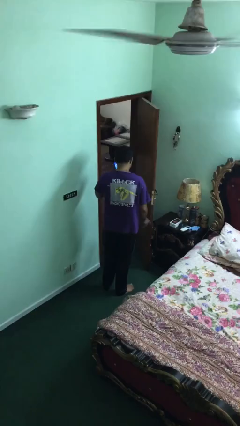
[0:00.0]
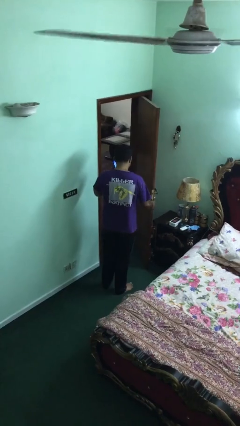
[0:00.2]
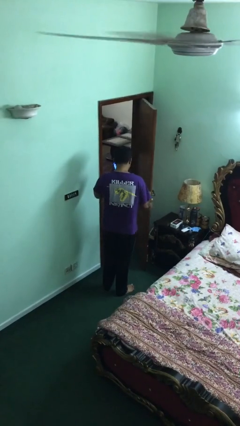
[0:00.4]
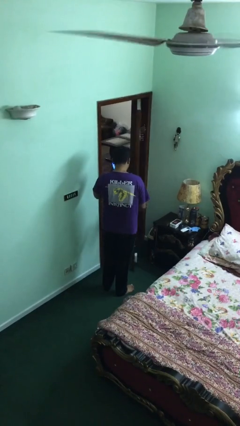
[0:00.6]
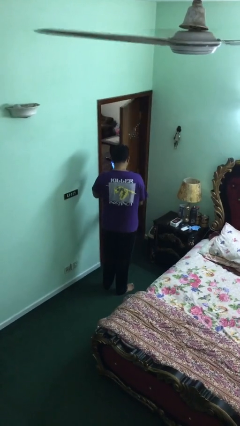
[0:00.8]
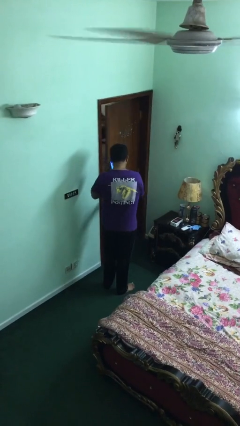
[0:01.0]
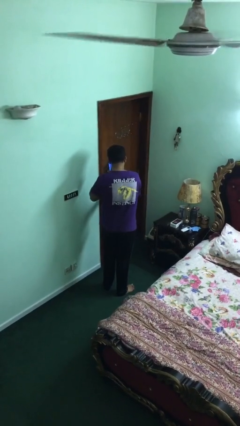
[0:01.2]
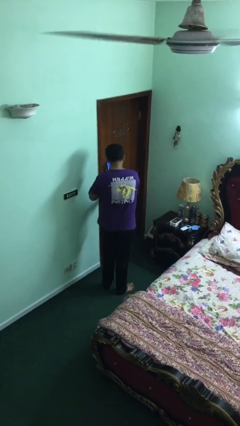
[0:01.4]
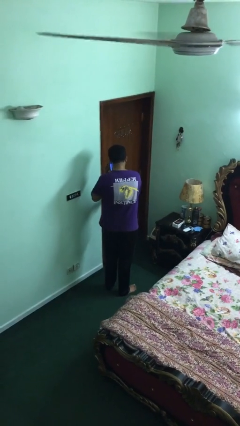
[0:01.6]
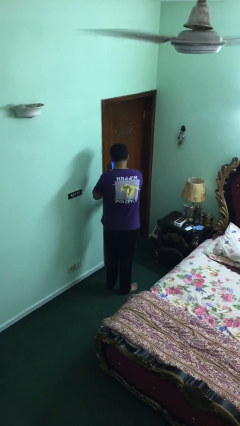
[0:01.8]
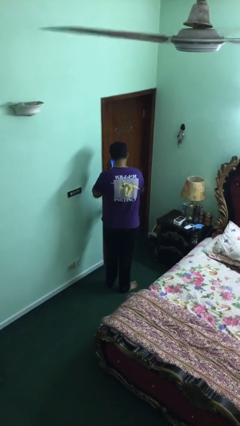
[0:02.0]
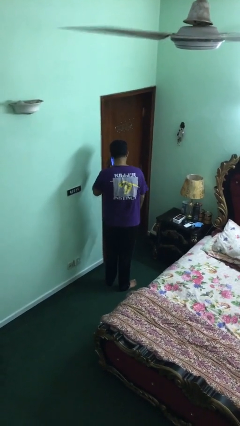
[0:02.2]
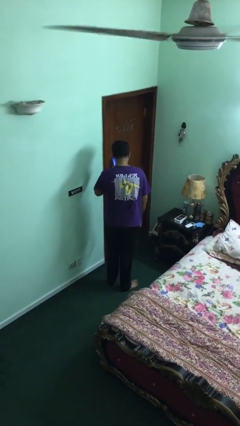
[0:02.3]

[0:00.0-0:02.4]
person closes facility door

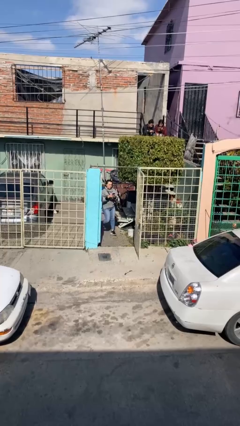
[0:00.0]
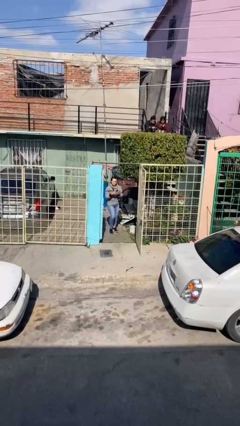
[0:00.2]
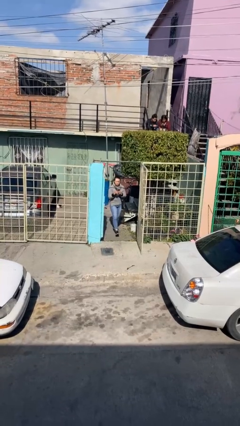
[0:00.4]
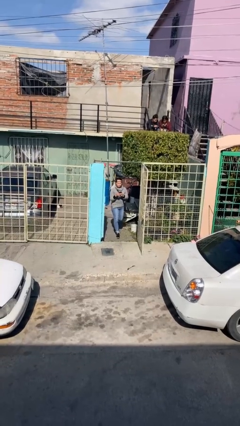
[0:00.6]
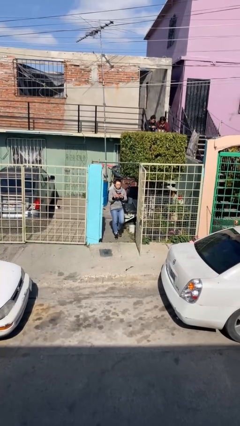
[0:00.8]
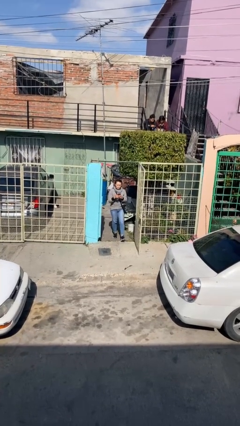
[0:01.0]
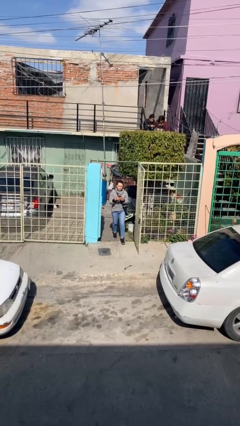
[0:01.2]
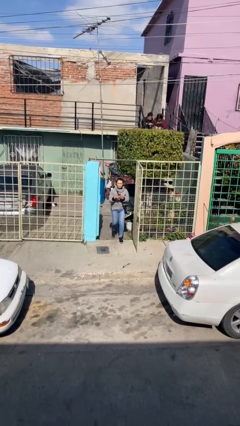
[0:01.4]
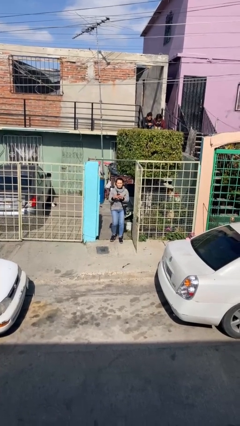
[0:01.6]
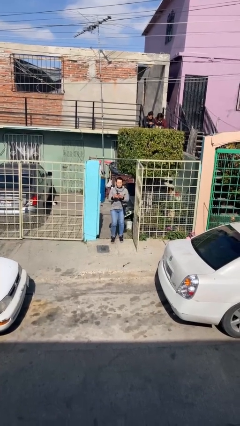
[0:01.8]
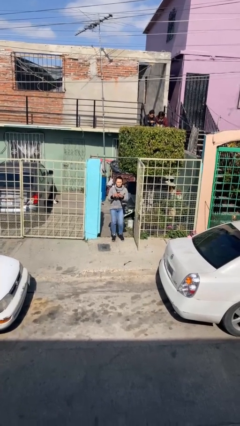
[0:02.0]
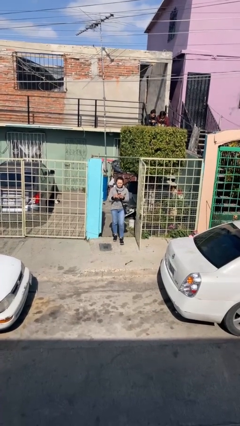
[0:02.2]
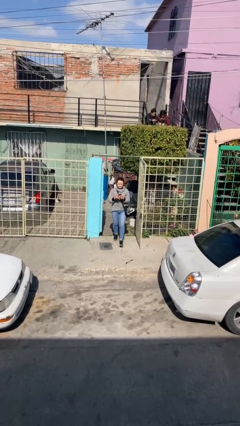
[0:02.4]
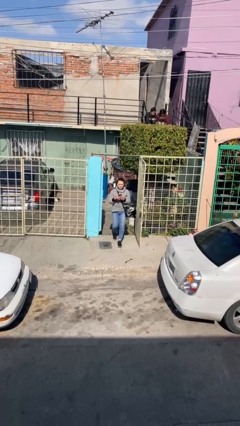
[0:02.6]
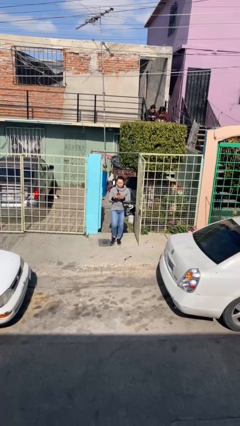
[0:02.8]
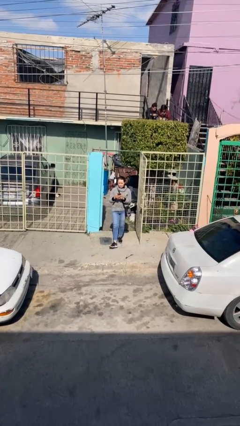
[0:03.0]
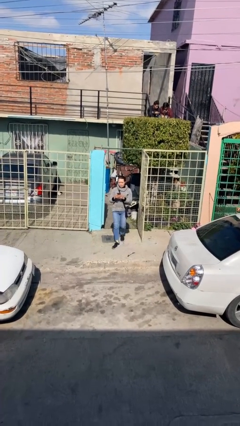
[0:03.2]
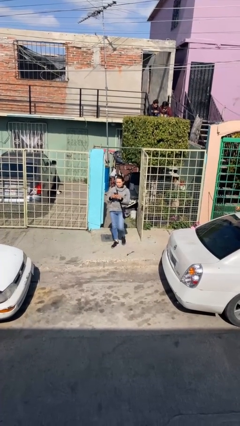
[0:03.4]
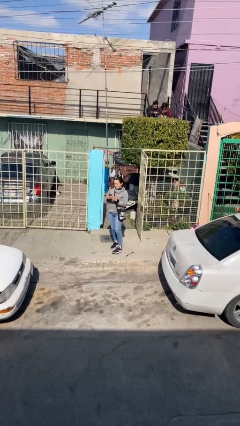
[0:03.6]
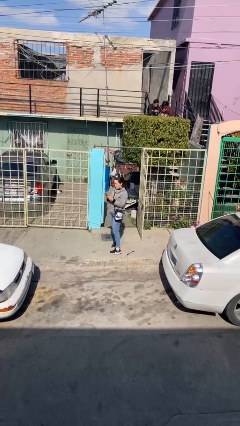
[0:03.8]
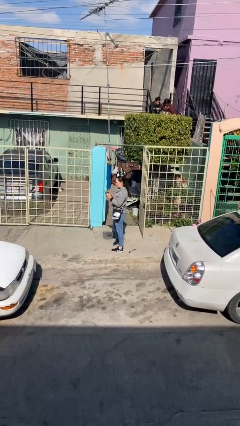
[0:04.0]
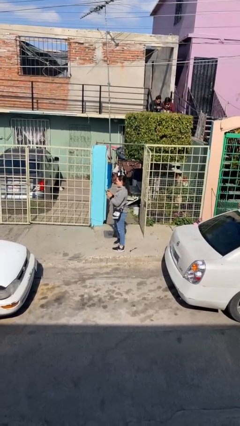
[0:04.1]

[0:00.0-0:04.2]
person enters scene through structure

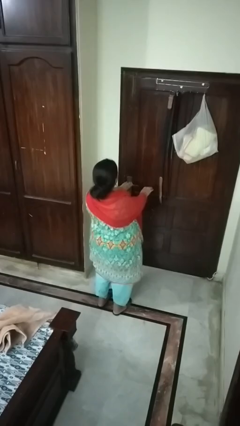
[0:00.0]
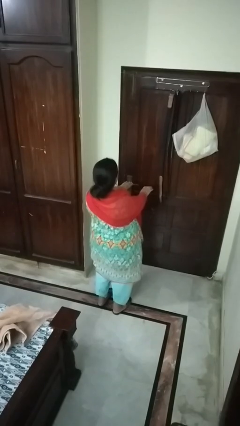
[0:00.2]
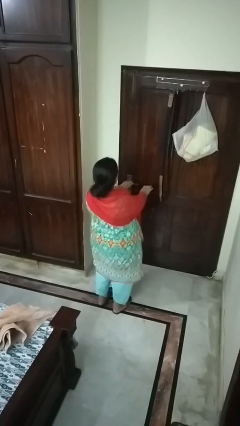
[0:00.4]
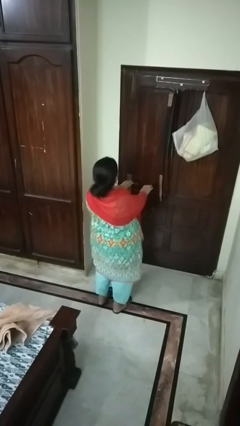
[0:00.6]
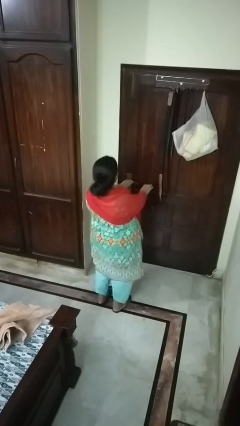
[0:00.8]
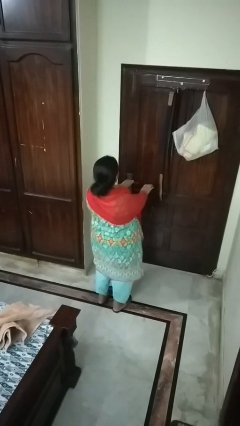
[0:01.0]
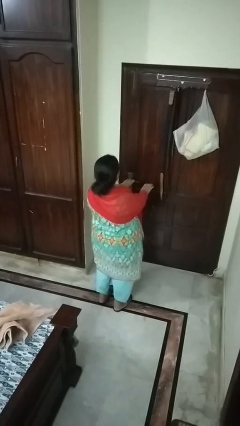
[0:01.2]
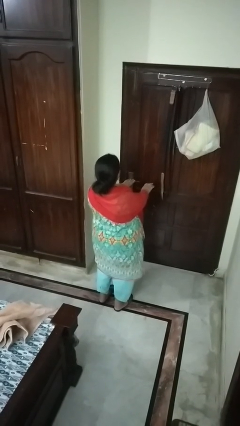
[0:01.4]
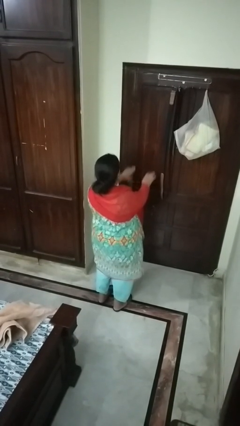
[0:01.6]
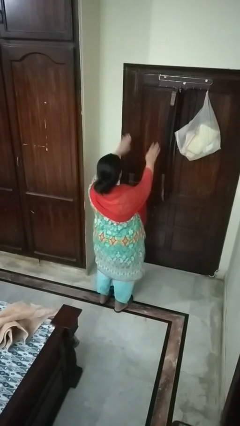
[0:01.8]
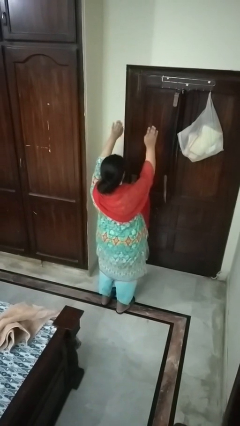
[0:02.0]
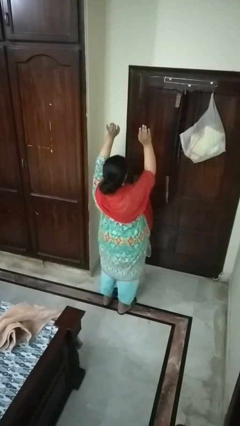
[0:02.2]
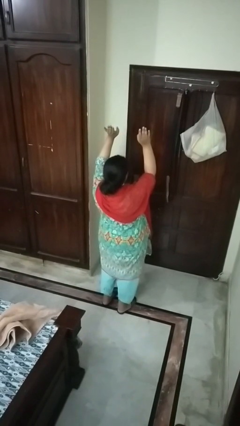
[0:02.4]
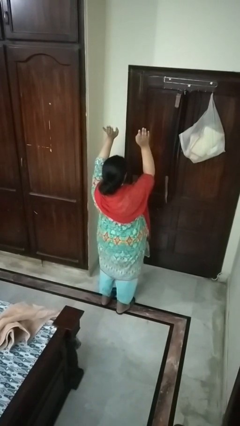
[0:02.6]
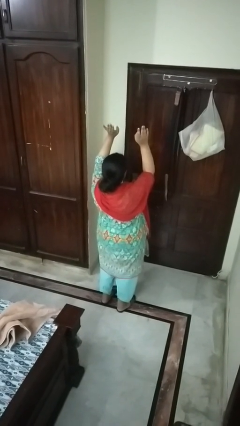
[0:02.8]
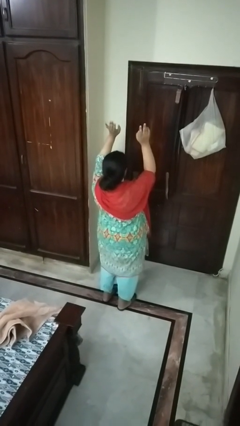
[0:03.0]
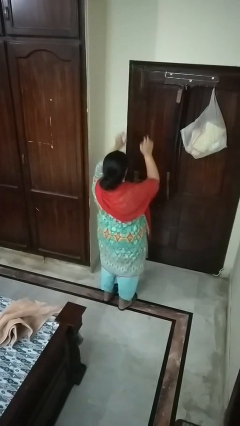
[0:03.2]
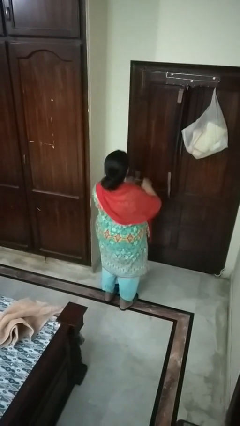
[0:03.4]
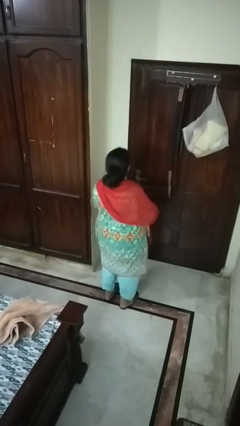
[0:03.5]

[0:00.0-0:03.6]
person stretches arms over head

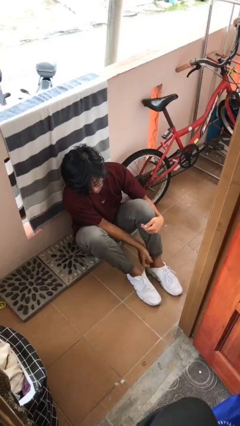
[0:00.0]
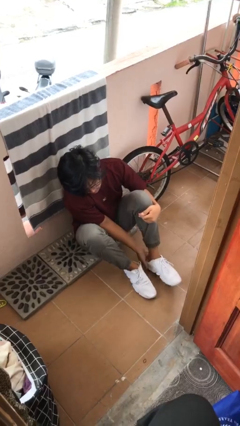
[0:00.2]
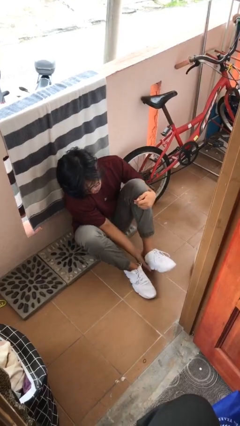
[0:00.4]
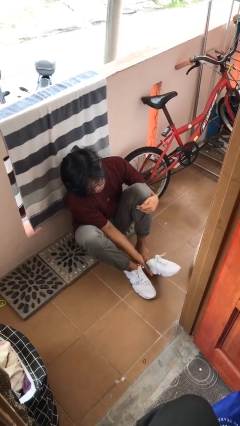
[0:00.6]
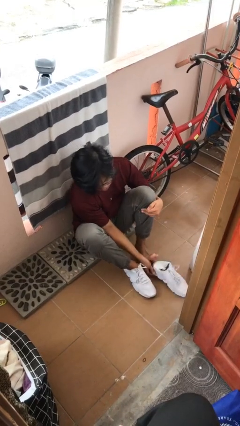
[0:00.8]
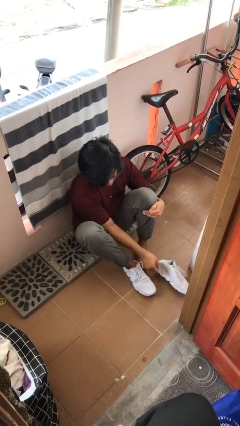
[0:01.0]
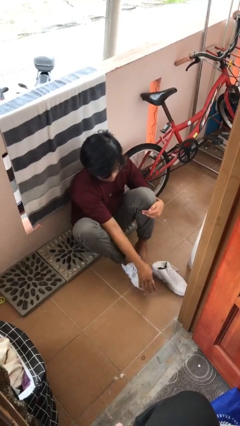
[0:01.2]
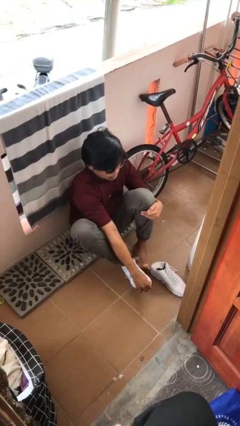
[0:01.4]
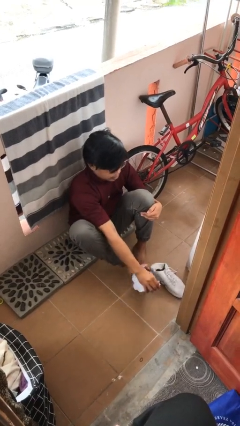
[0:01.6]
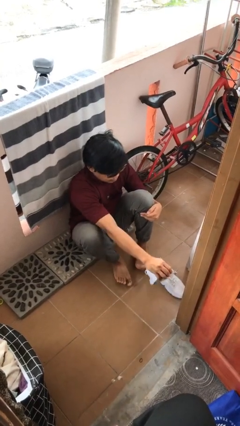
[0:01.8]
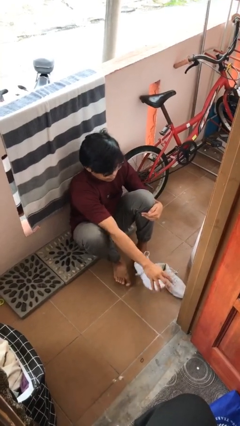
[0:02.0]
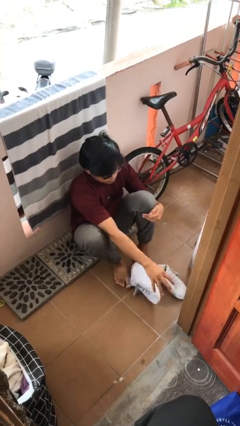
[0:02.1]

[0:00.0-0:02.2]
person takes off shoes

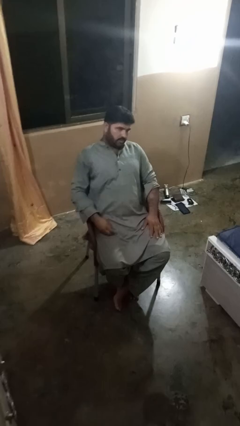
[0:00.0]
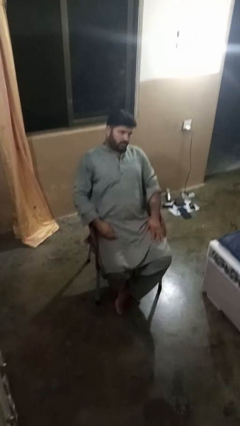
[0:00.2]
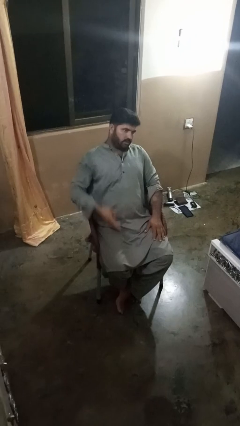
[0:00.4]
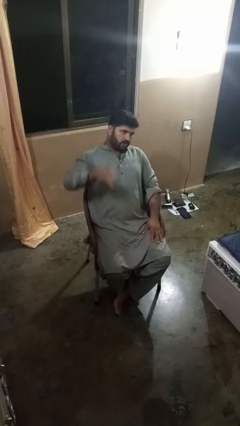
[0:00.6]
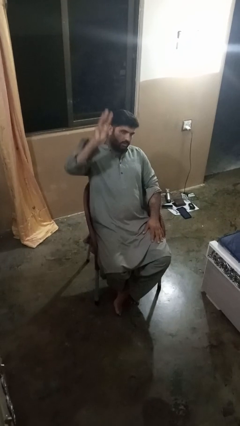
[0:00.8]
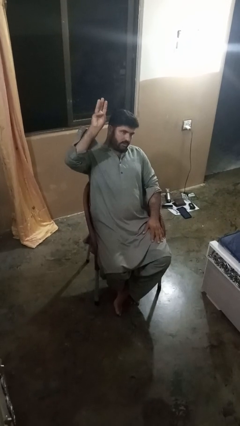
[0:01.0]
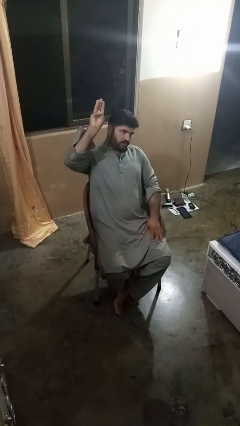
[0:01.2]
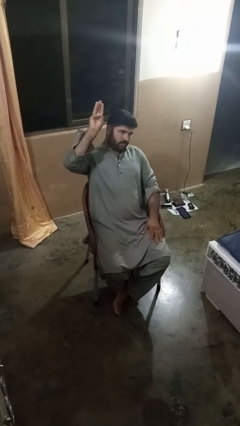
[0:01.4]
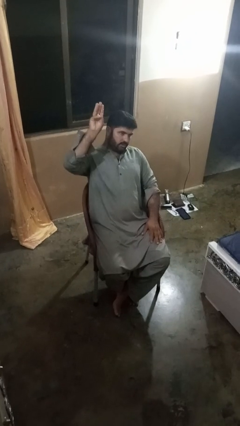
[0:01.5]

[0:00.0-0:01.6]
person gestures number three

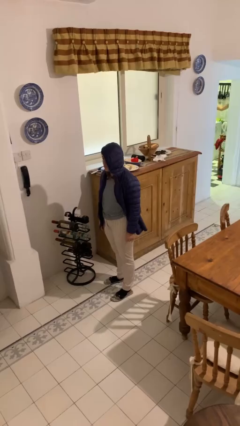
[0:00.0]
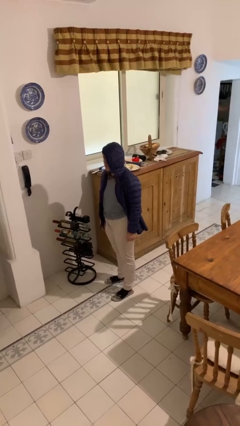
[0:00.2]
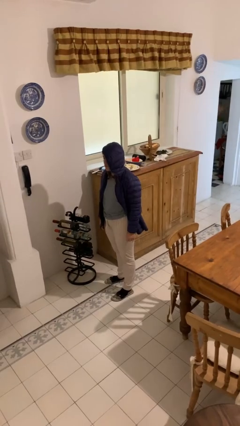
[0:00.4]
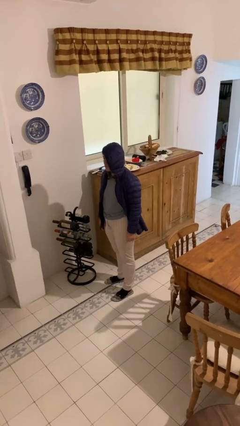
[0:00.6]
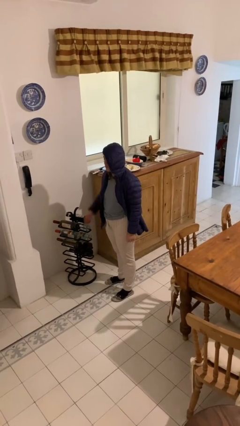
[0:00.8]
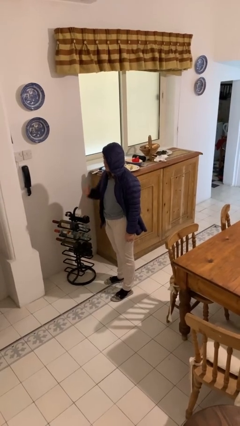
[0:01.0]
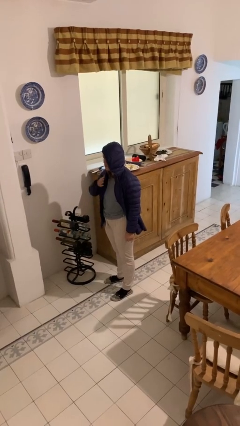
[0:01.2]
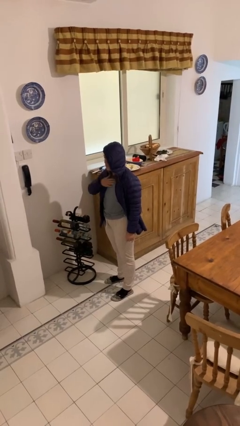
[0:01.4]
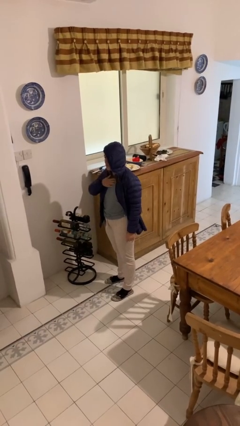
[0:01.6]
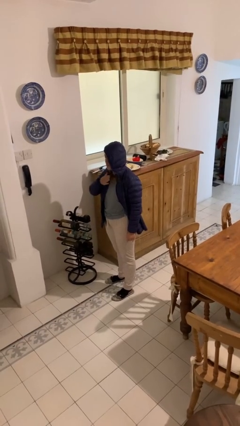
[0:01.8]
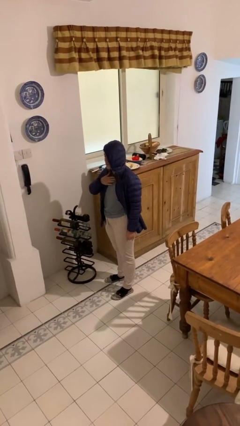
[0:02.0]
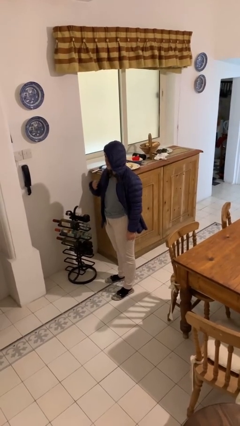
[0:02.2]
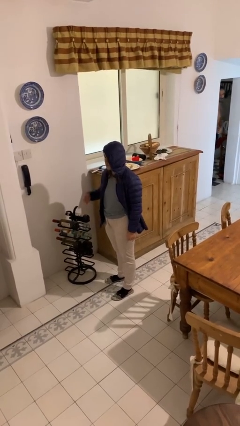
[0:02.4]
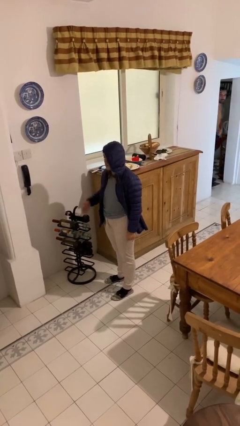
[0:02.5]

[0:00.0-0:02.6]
person drums on chest

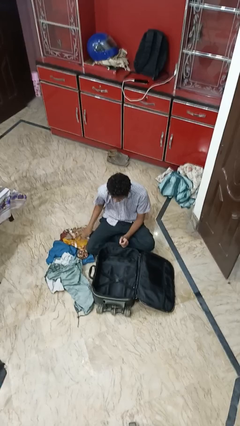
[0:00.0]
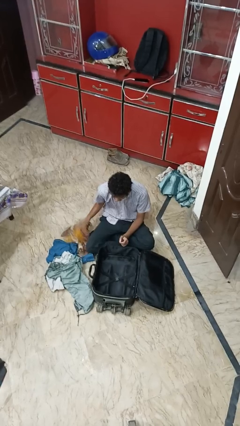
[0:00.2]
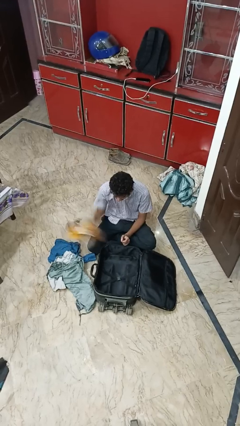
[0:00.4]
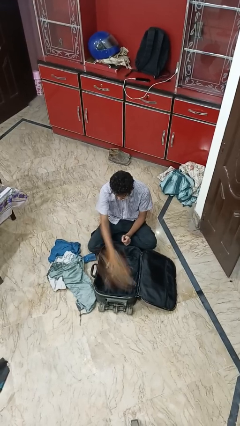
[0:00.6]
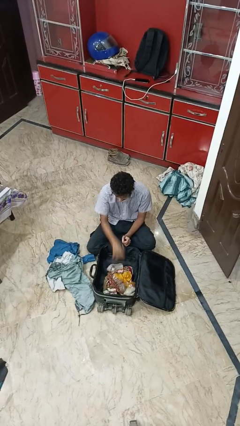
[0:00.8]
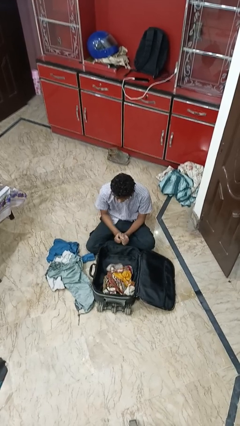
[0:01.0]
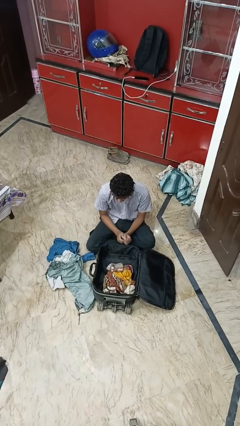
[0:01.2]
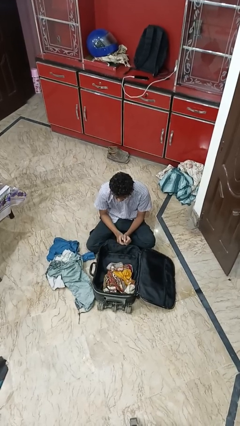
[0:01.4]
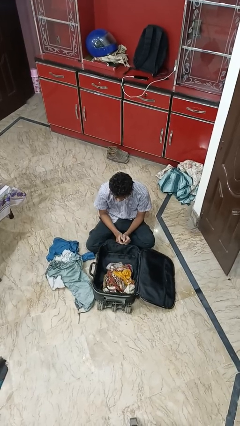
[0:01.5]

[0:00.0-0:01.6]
person loads clothes into suitcase
